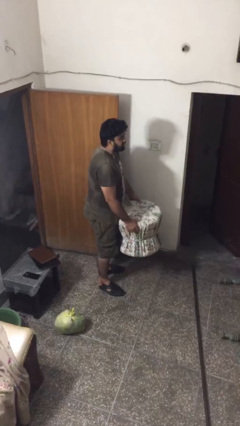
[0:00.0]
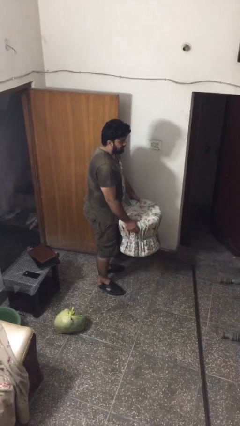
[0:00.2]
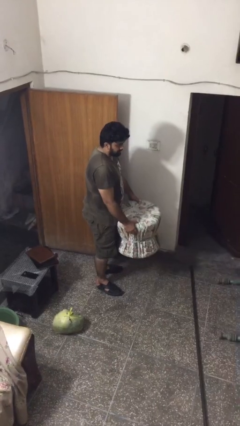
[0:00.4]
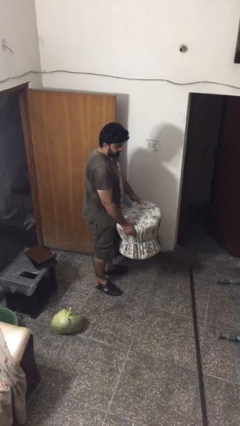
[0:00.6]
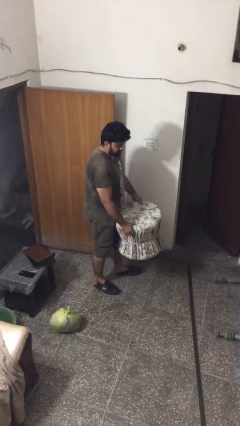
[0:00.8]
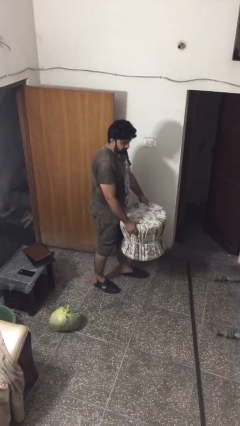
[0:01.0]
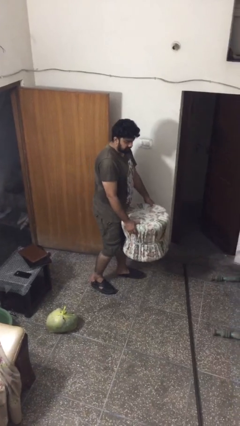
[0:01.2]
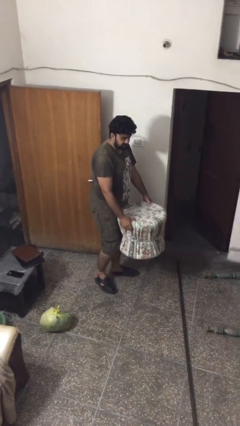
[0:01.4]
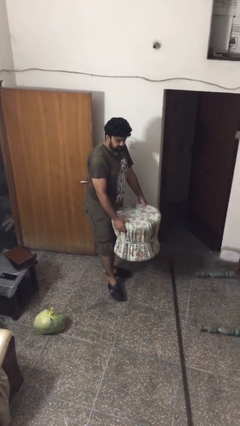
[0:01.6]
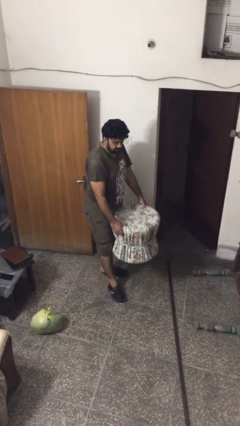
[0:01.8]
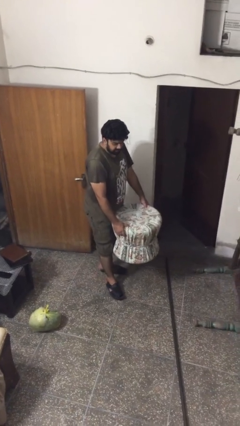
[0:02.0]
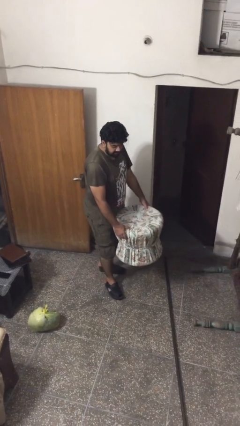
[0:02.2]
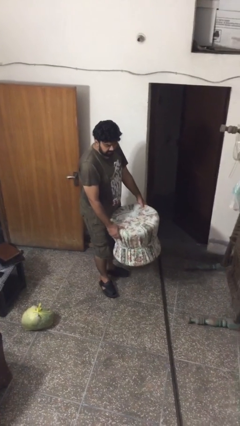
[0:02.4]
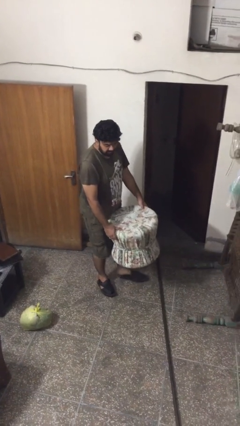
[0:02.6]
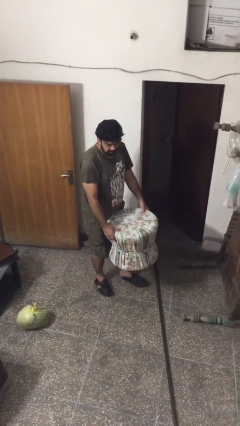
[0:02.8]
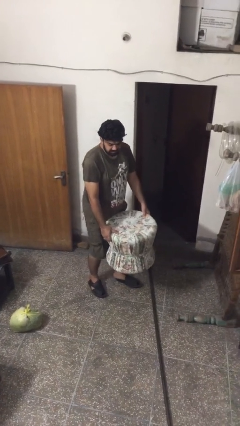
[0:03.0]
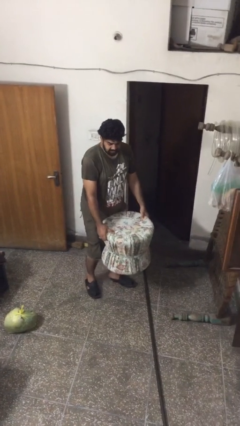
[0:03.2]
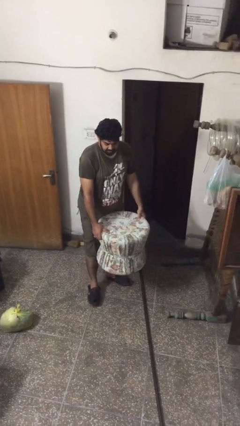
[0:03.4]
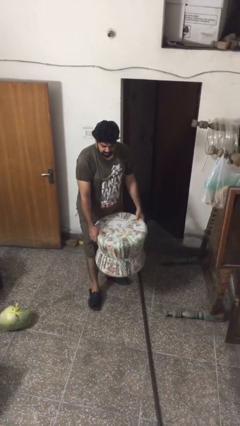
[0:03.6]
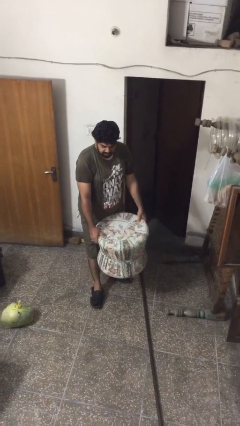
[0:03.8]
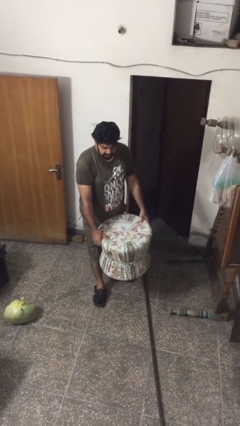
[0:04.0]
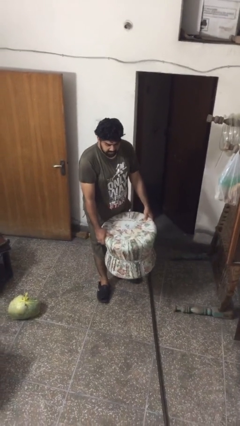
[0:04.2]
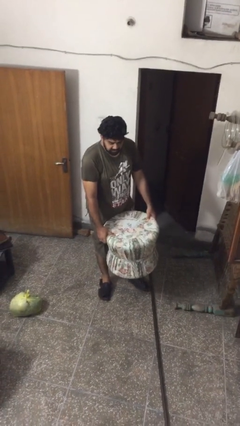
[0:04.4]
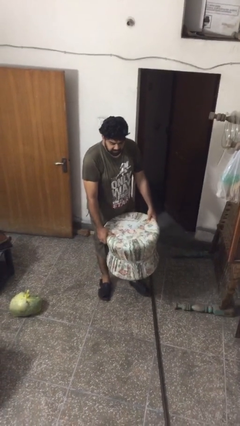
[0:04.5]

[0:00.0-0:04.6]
person carries heavy object

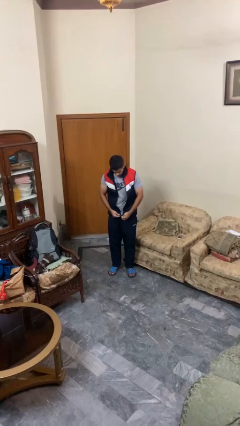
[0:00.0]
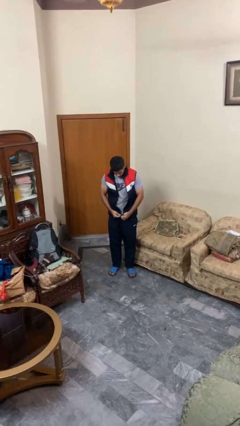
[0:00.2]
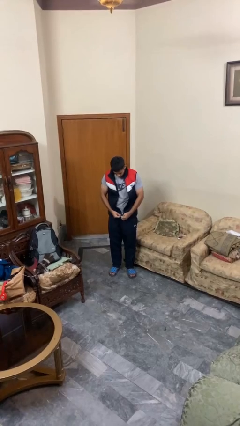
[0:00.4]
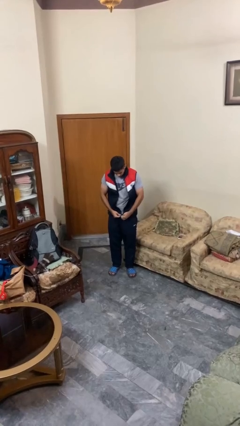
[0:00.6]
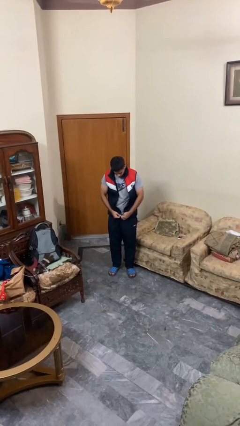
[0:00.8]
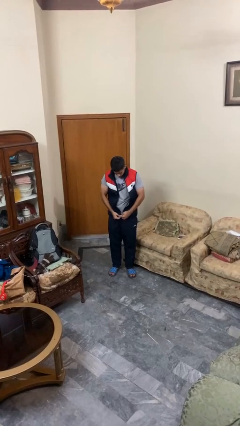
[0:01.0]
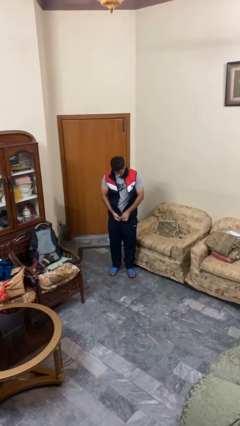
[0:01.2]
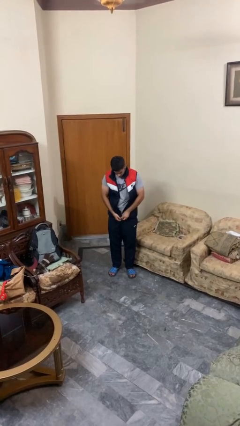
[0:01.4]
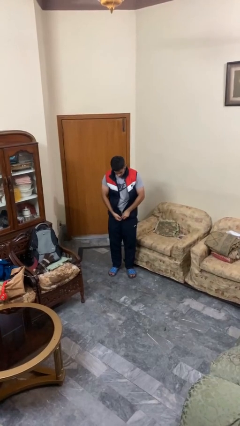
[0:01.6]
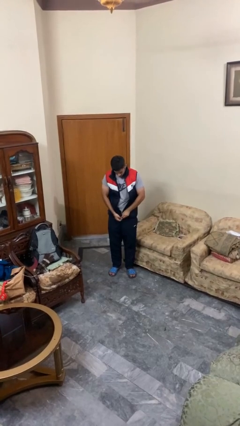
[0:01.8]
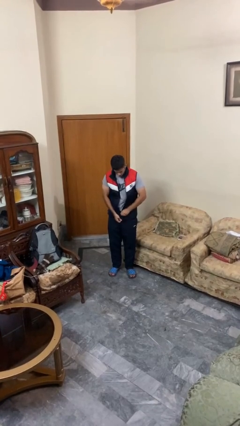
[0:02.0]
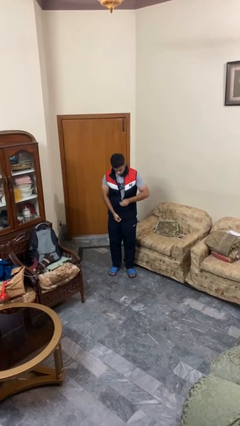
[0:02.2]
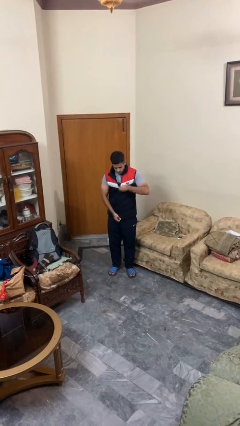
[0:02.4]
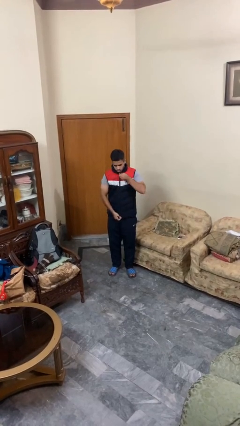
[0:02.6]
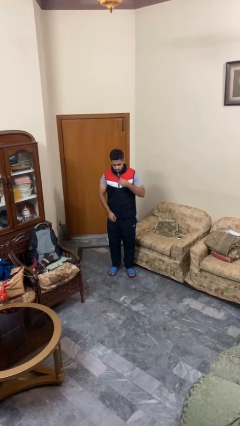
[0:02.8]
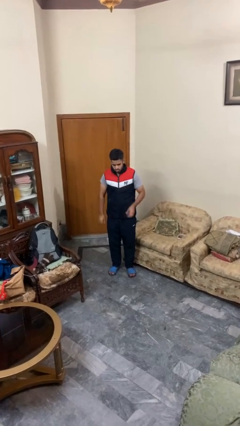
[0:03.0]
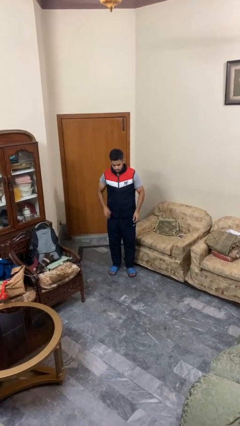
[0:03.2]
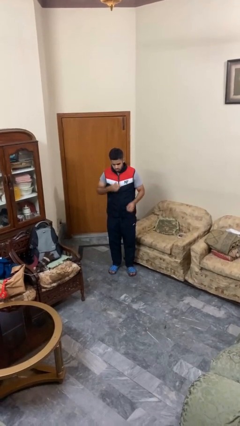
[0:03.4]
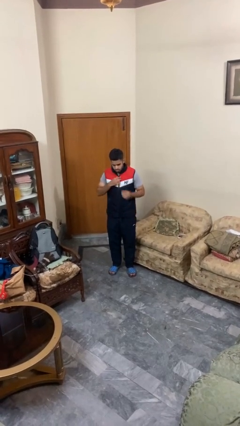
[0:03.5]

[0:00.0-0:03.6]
person zips up jacket

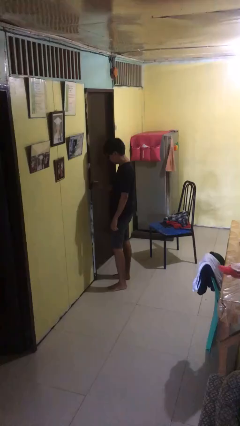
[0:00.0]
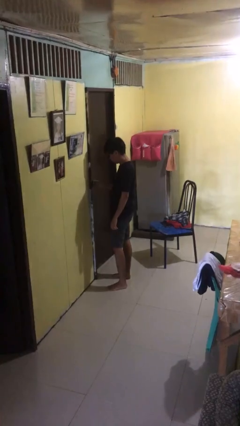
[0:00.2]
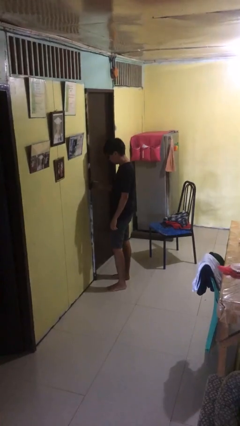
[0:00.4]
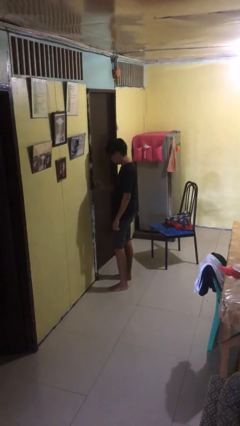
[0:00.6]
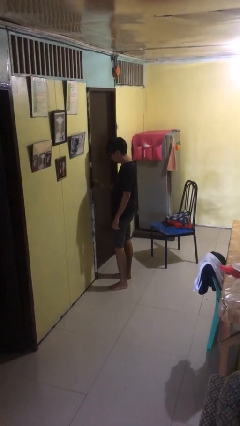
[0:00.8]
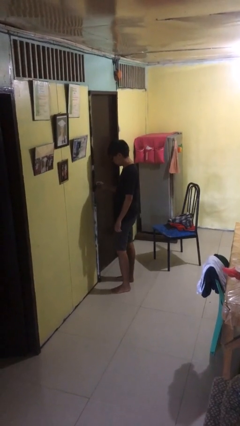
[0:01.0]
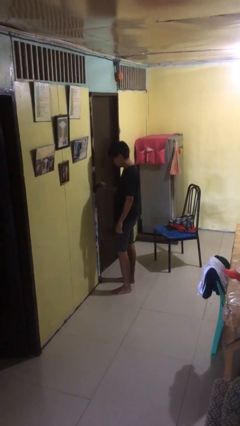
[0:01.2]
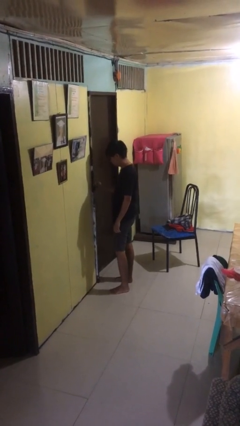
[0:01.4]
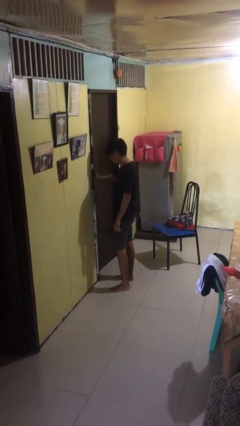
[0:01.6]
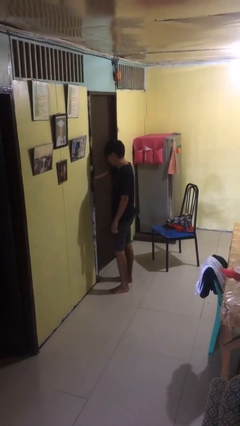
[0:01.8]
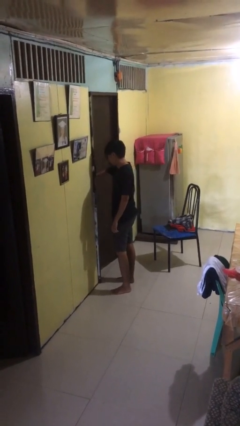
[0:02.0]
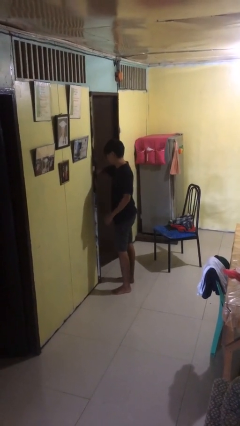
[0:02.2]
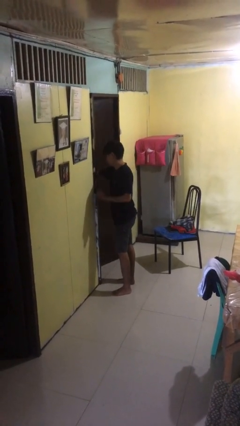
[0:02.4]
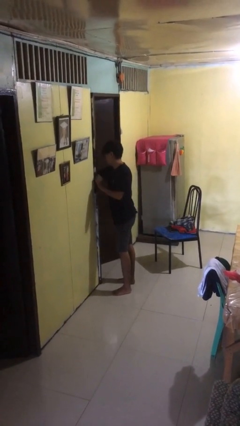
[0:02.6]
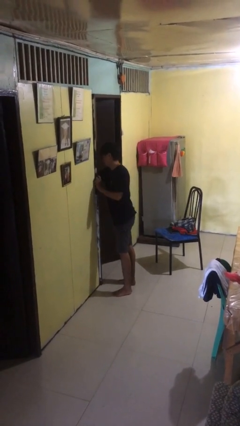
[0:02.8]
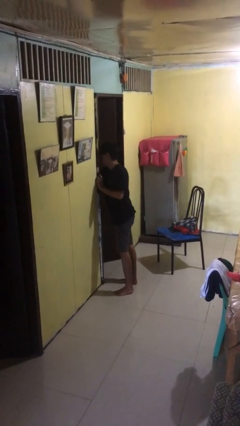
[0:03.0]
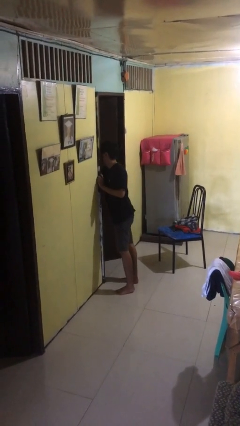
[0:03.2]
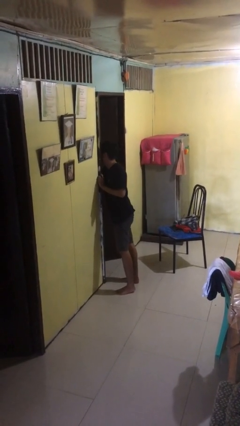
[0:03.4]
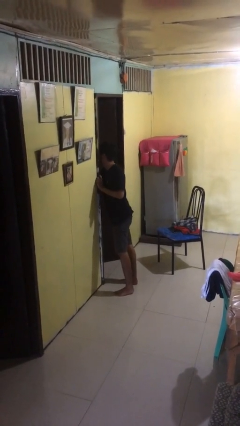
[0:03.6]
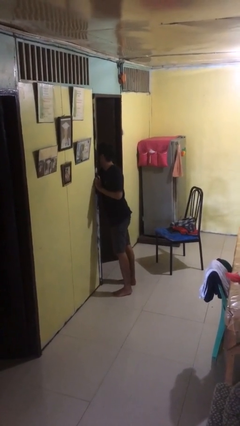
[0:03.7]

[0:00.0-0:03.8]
person opens facility door

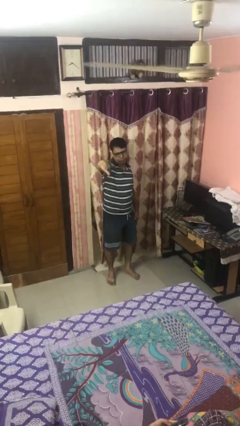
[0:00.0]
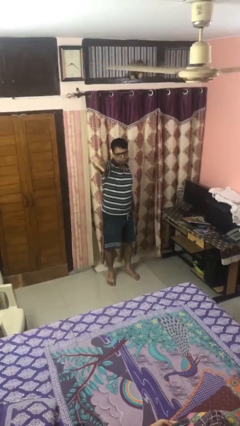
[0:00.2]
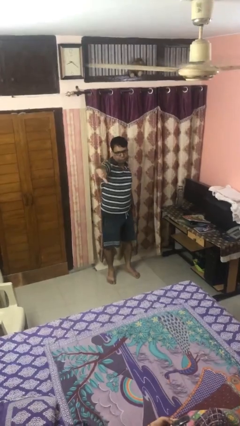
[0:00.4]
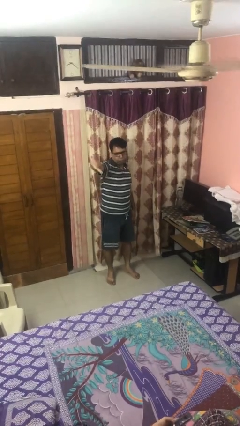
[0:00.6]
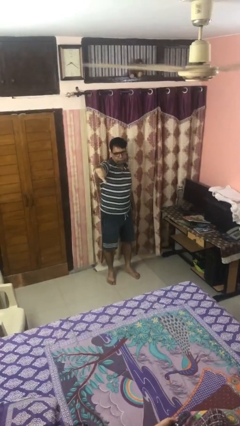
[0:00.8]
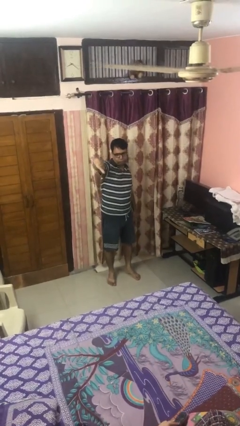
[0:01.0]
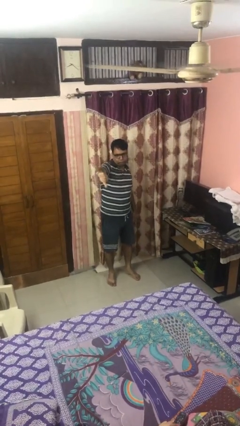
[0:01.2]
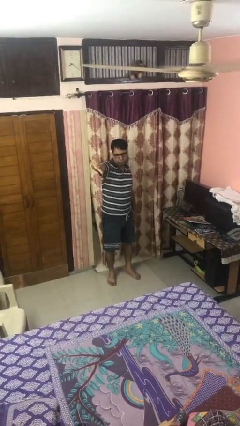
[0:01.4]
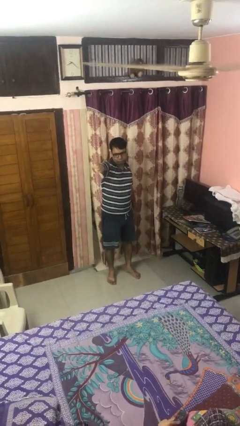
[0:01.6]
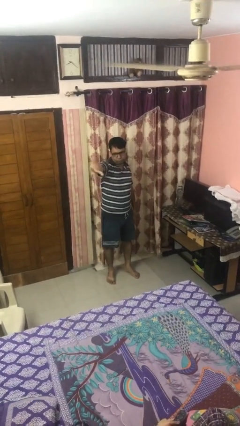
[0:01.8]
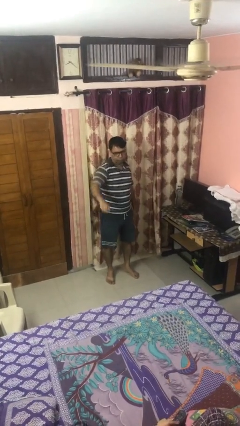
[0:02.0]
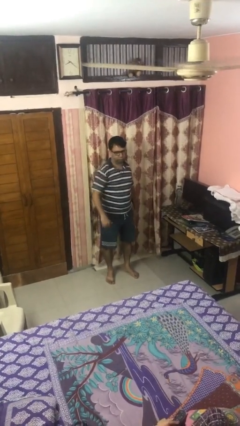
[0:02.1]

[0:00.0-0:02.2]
person gestures thumbs down

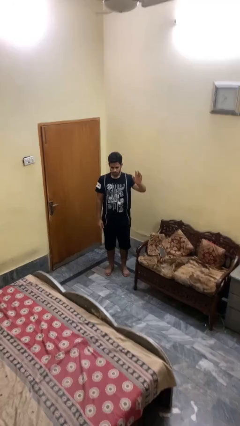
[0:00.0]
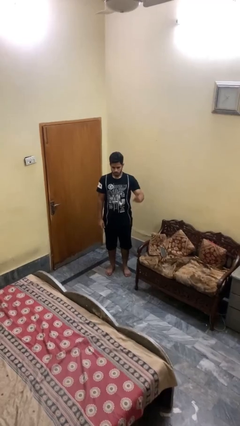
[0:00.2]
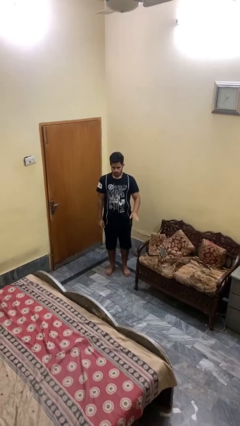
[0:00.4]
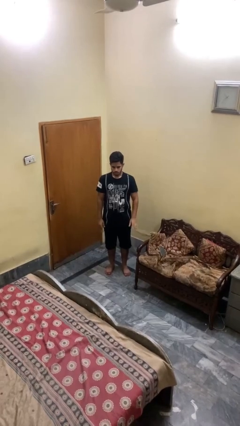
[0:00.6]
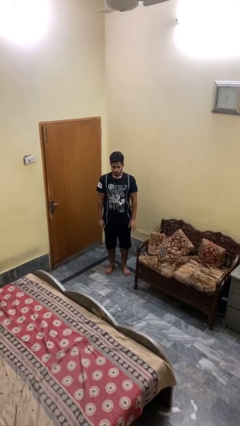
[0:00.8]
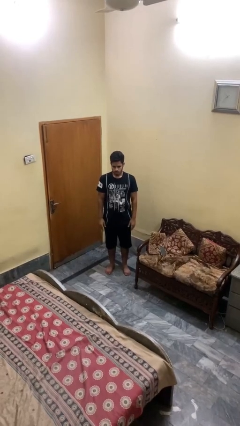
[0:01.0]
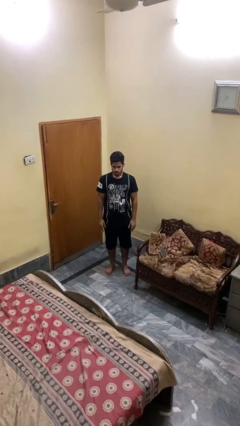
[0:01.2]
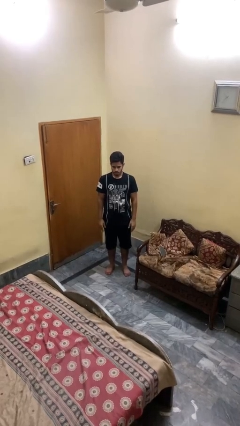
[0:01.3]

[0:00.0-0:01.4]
person gestures lower hand

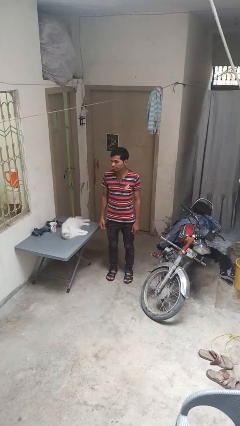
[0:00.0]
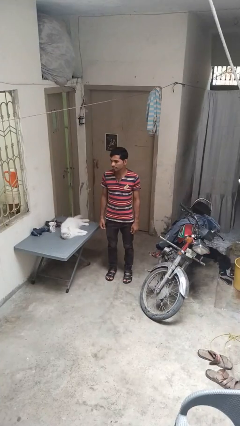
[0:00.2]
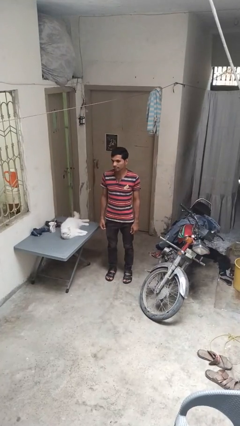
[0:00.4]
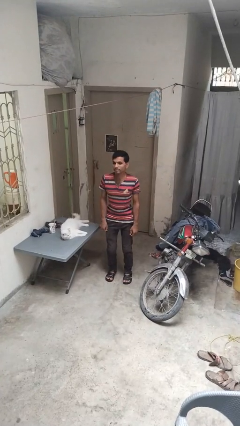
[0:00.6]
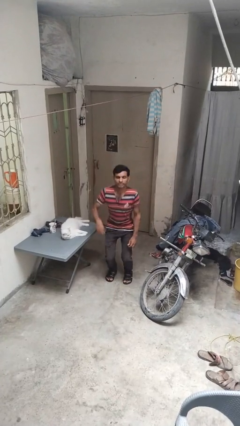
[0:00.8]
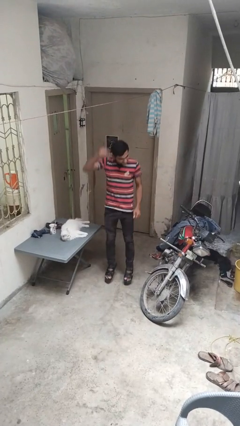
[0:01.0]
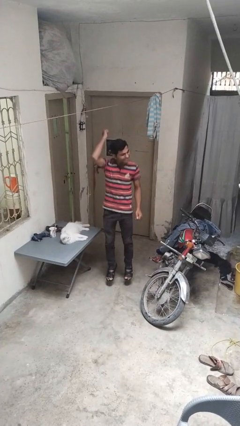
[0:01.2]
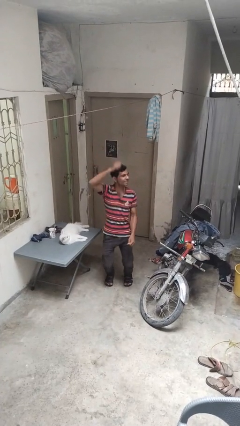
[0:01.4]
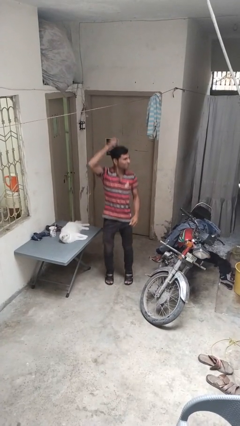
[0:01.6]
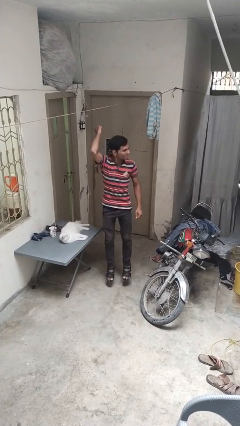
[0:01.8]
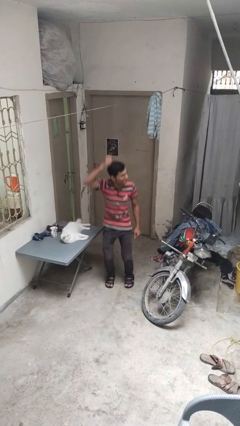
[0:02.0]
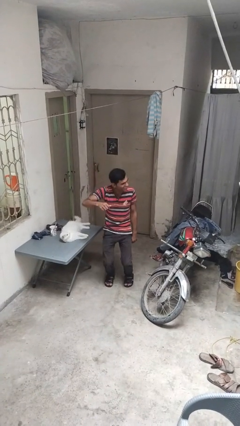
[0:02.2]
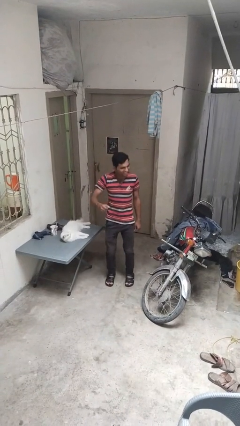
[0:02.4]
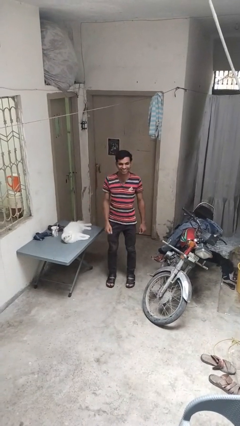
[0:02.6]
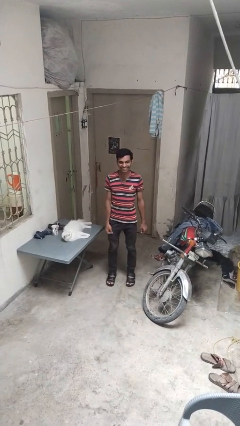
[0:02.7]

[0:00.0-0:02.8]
person jumps
